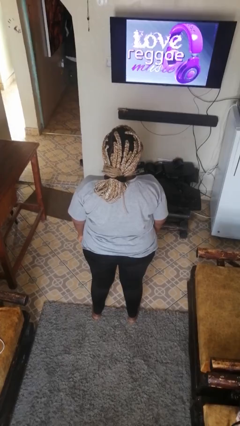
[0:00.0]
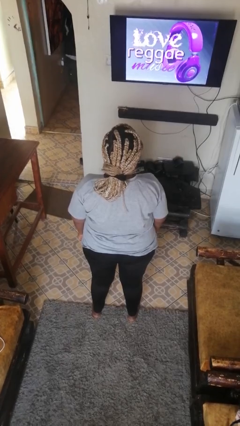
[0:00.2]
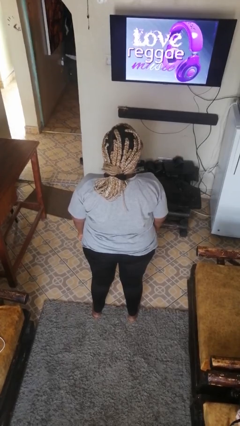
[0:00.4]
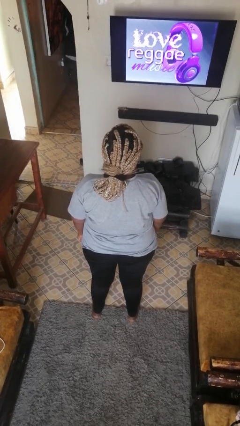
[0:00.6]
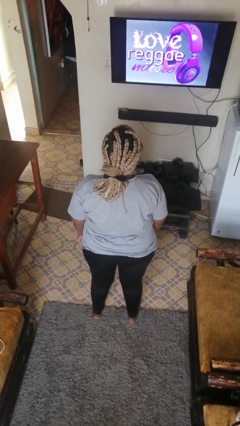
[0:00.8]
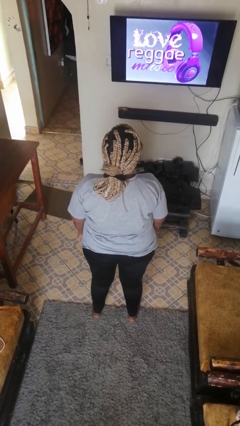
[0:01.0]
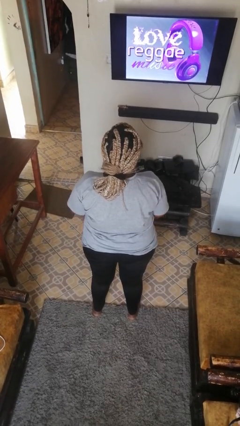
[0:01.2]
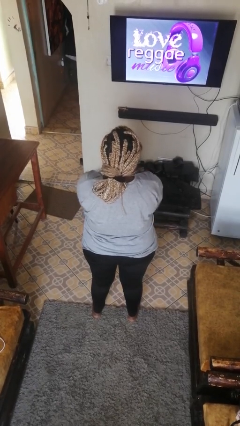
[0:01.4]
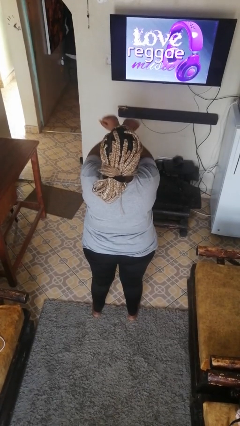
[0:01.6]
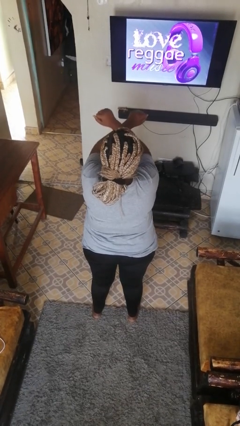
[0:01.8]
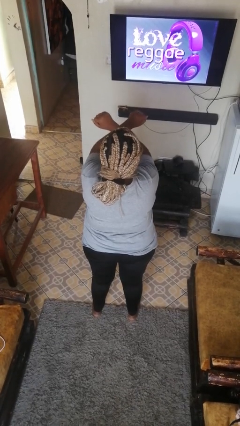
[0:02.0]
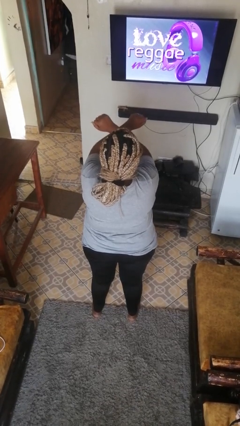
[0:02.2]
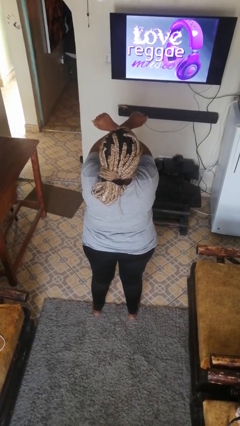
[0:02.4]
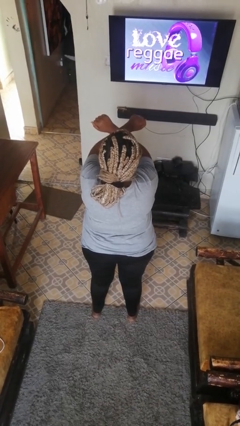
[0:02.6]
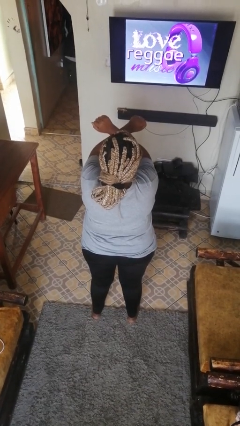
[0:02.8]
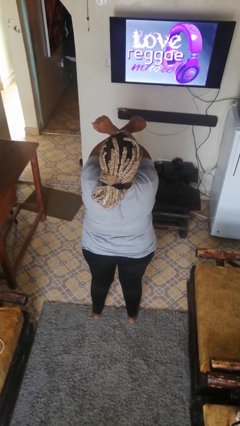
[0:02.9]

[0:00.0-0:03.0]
person gestures arms x

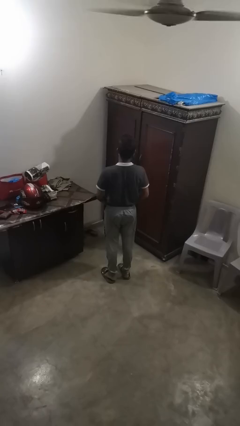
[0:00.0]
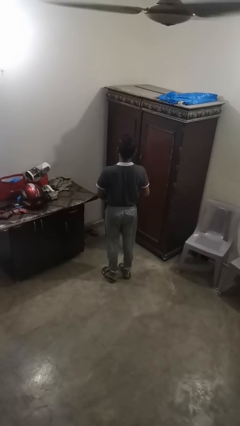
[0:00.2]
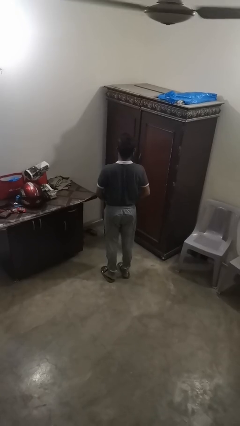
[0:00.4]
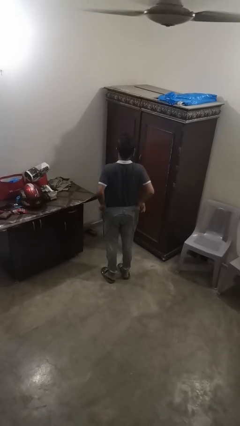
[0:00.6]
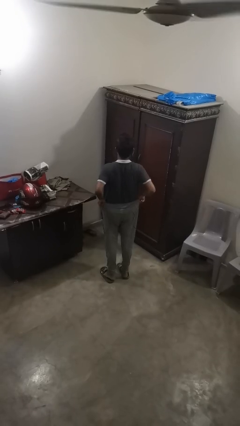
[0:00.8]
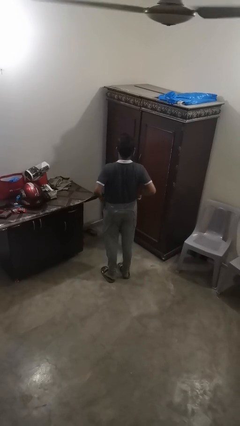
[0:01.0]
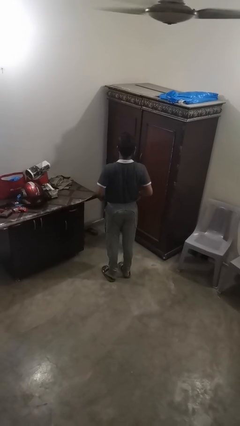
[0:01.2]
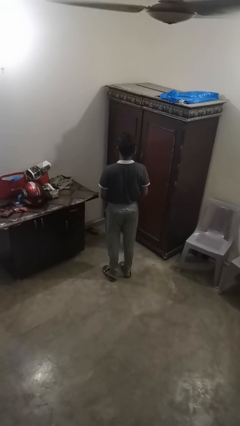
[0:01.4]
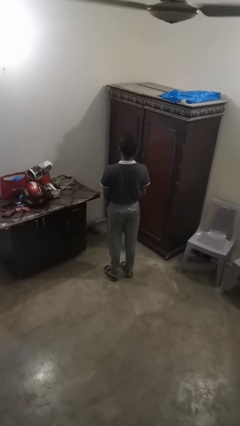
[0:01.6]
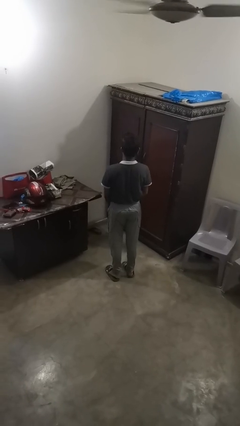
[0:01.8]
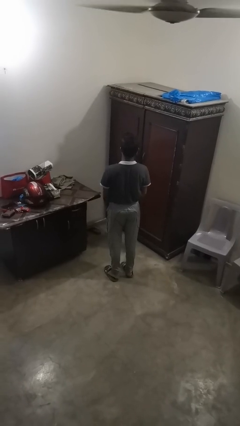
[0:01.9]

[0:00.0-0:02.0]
person hikes up pants

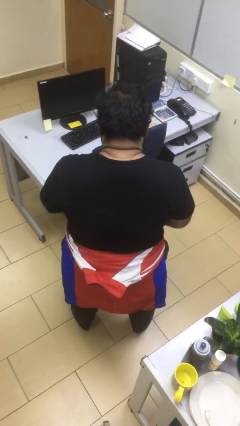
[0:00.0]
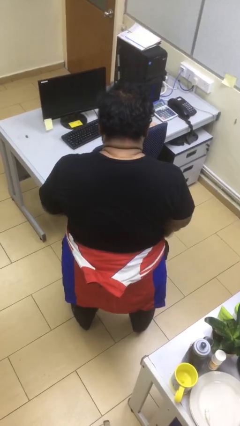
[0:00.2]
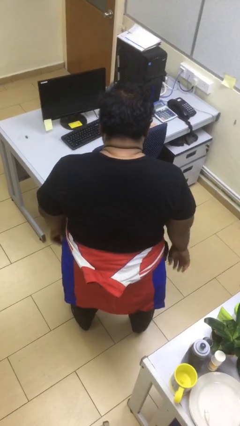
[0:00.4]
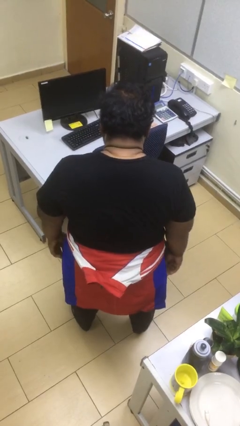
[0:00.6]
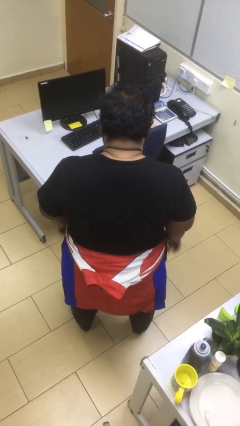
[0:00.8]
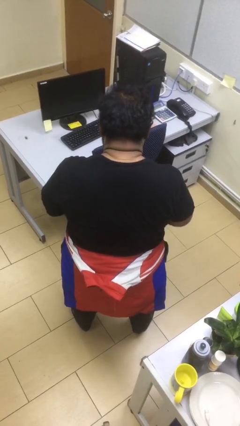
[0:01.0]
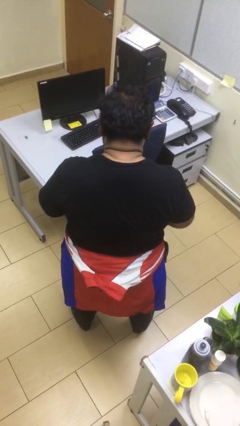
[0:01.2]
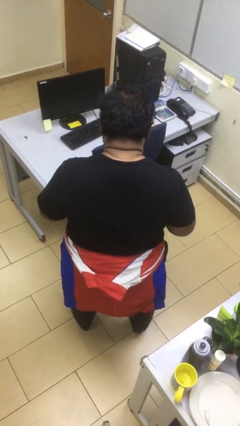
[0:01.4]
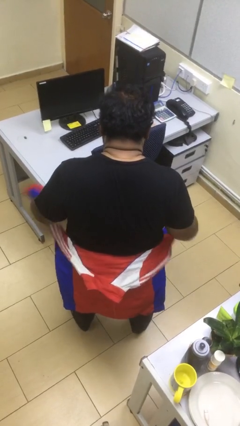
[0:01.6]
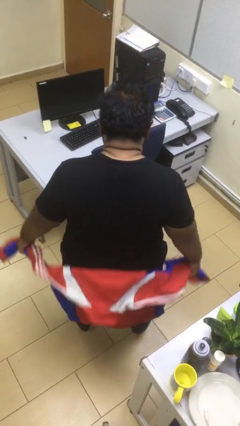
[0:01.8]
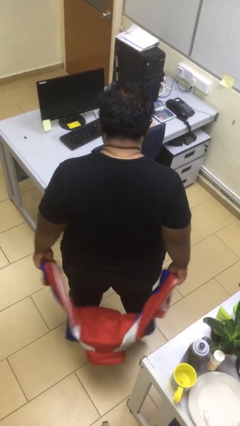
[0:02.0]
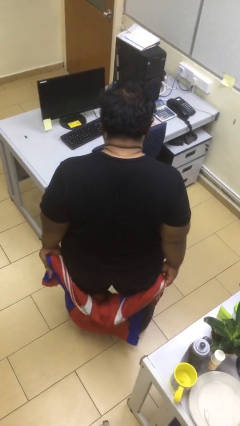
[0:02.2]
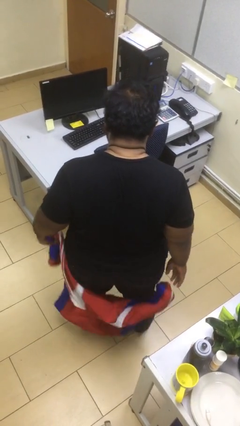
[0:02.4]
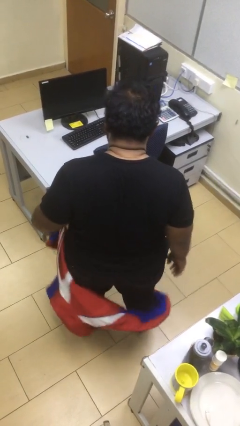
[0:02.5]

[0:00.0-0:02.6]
person unties jacket around waist

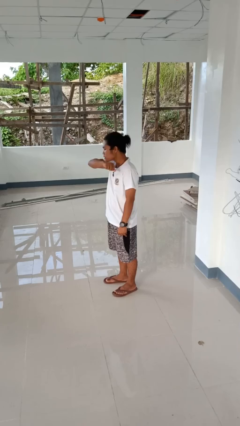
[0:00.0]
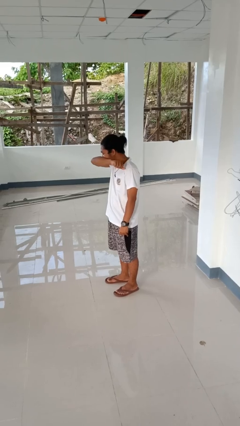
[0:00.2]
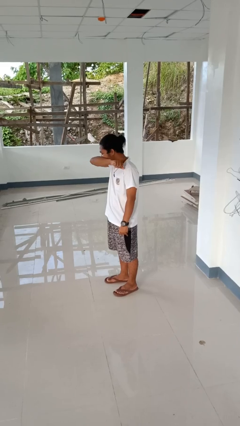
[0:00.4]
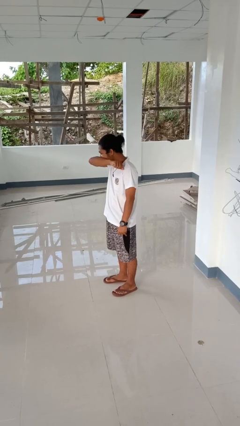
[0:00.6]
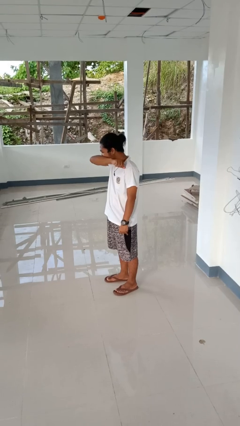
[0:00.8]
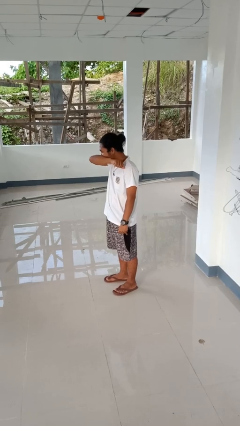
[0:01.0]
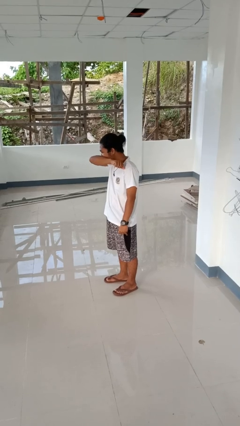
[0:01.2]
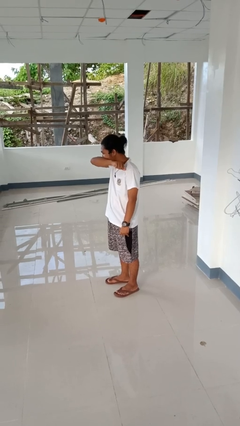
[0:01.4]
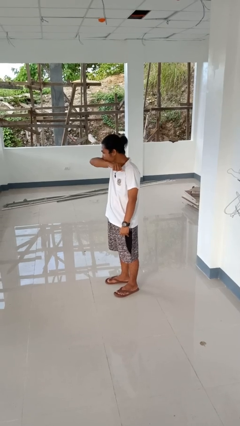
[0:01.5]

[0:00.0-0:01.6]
person sneezes into arm

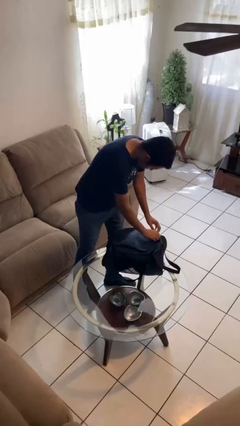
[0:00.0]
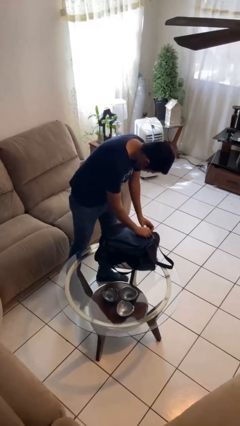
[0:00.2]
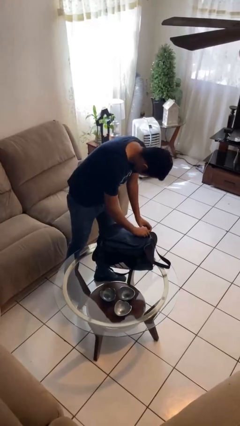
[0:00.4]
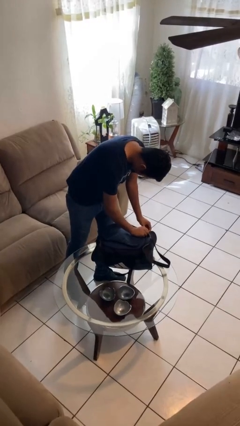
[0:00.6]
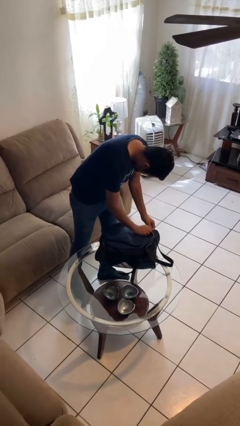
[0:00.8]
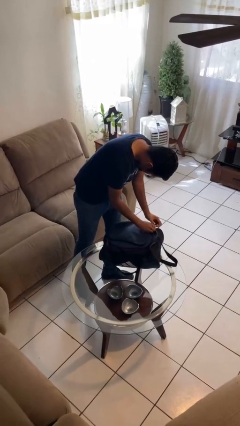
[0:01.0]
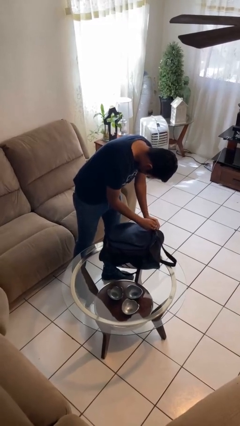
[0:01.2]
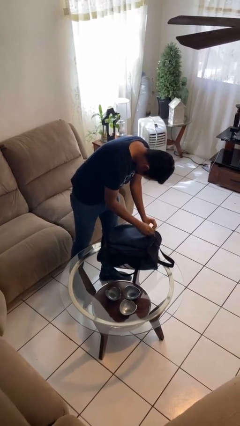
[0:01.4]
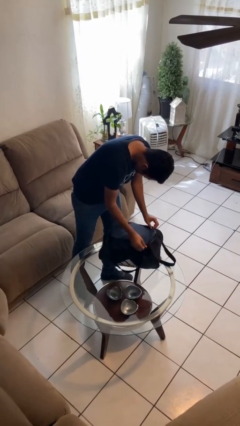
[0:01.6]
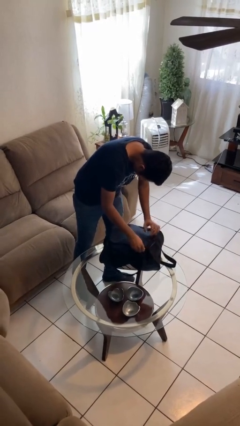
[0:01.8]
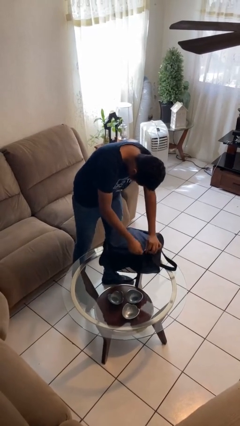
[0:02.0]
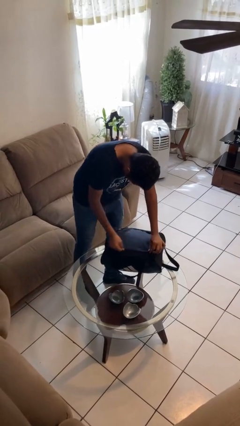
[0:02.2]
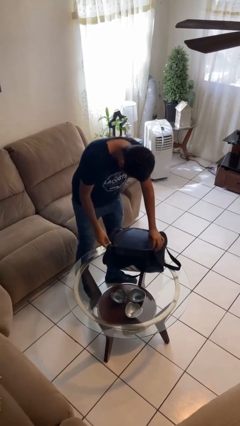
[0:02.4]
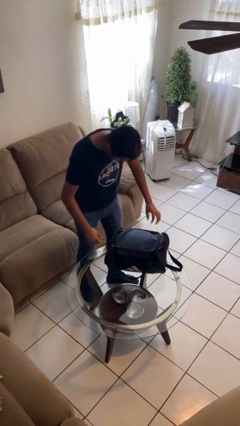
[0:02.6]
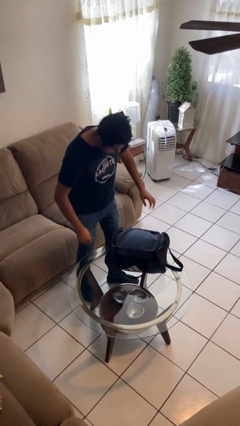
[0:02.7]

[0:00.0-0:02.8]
person closes suitcase

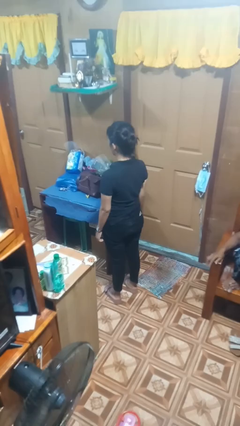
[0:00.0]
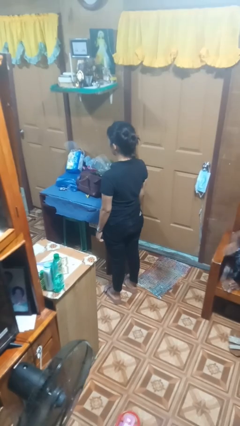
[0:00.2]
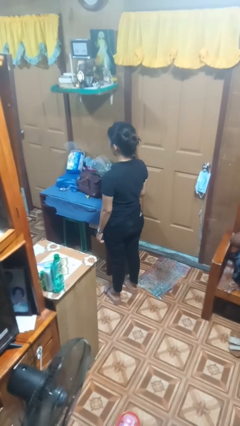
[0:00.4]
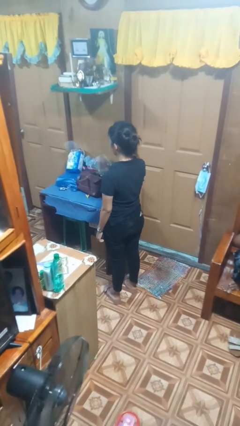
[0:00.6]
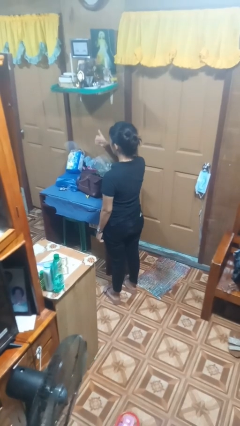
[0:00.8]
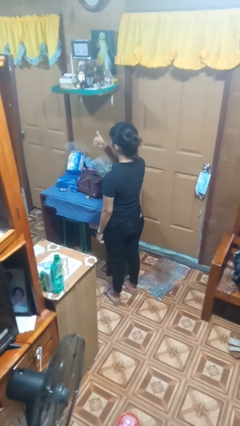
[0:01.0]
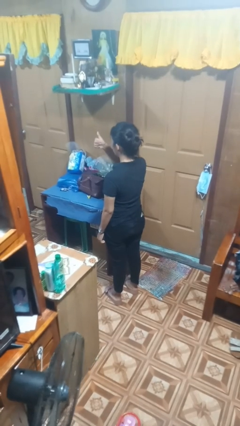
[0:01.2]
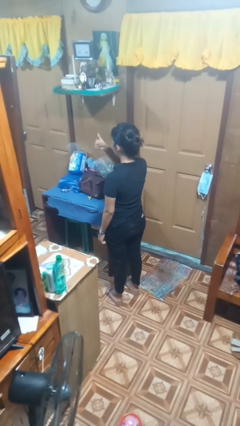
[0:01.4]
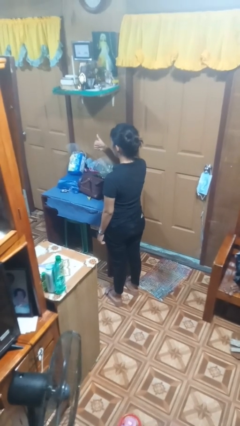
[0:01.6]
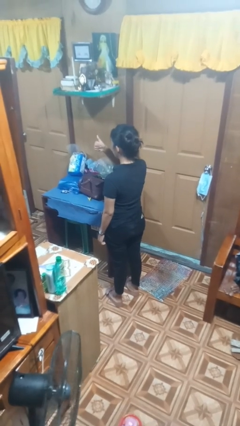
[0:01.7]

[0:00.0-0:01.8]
person gestures thumbs up

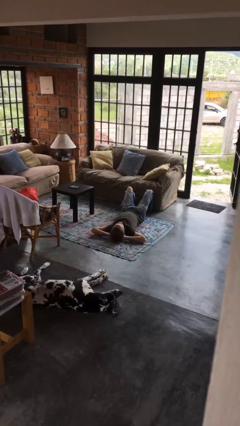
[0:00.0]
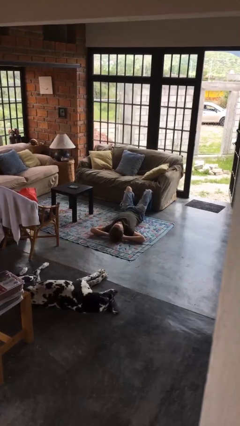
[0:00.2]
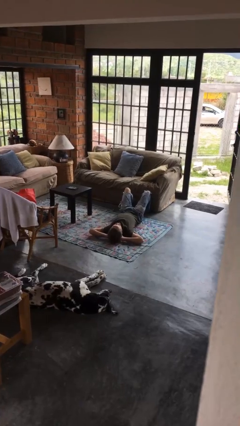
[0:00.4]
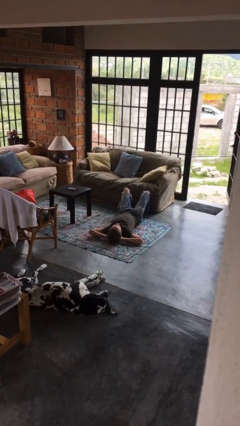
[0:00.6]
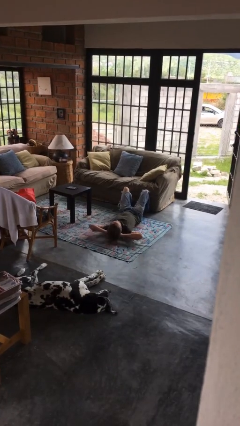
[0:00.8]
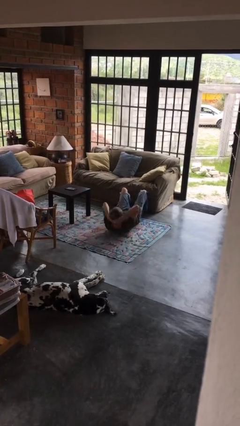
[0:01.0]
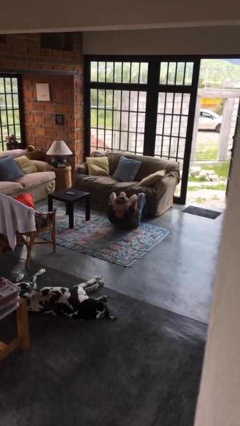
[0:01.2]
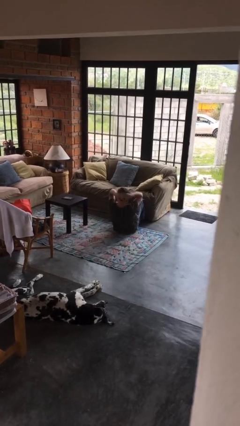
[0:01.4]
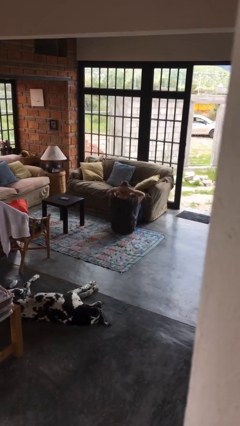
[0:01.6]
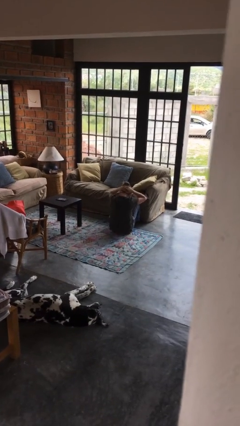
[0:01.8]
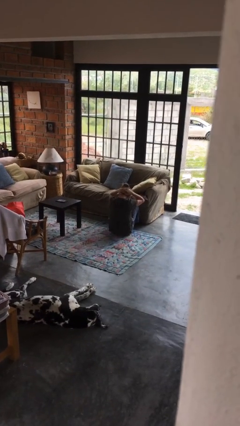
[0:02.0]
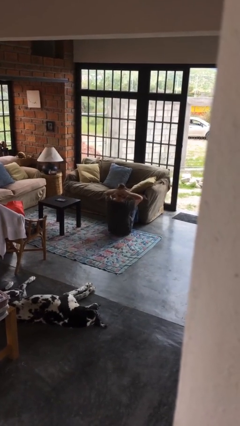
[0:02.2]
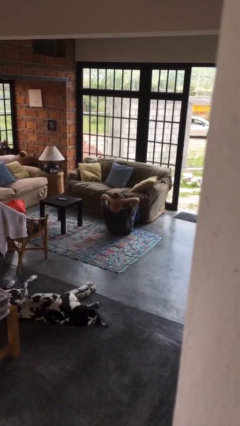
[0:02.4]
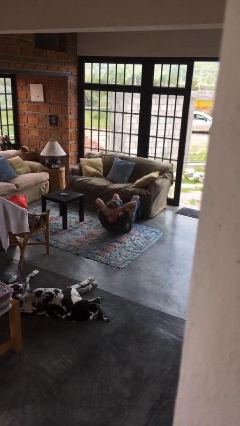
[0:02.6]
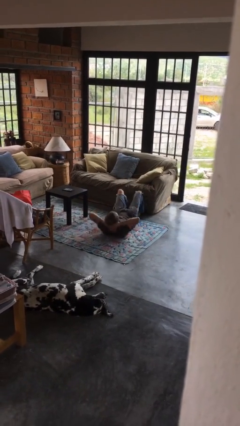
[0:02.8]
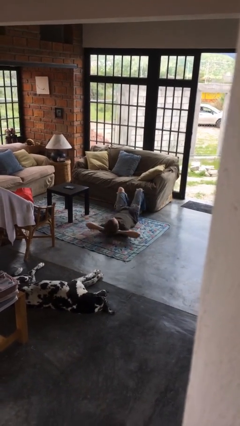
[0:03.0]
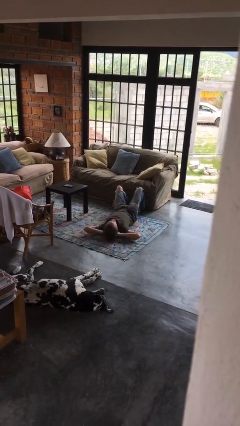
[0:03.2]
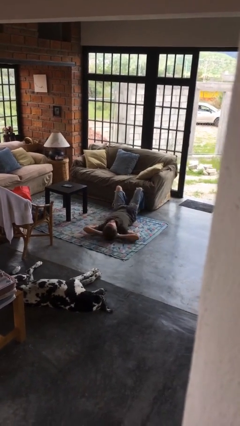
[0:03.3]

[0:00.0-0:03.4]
person exercises with situp
